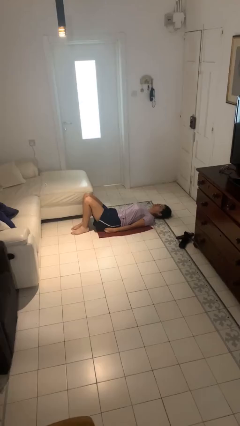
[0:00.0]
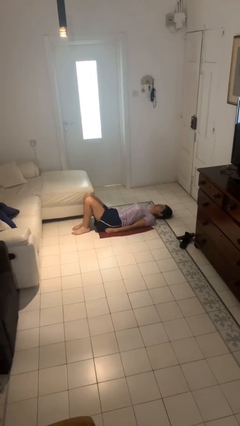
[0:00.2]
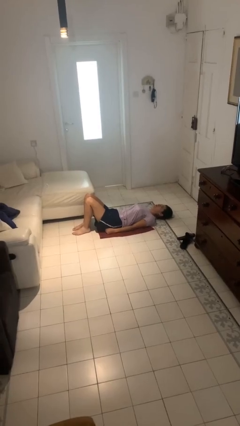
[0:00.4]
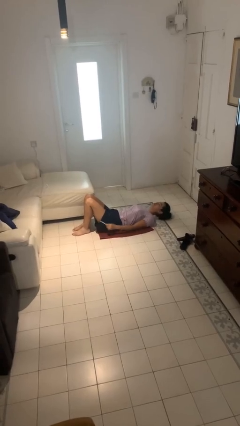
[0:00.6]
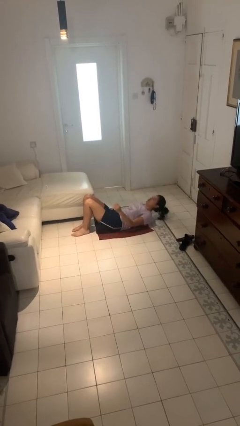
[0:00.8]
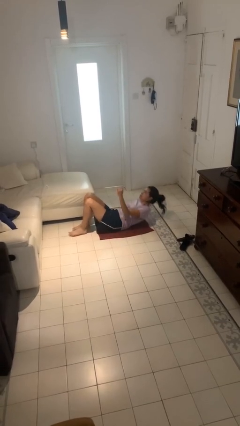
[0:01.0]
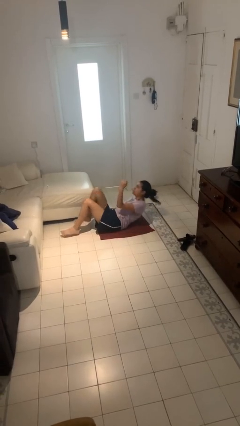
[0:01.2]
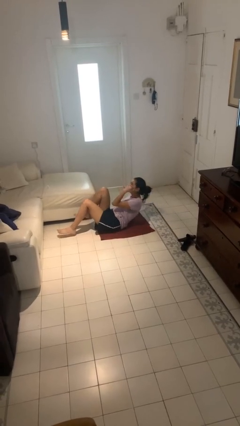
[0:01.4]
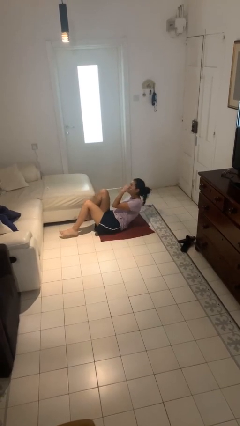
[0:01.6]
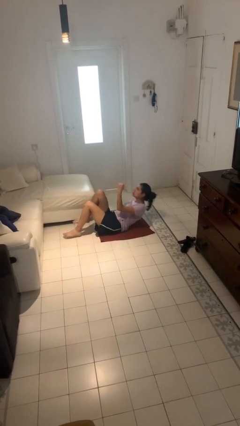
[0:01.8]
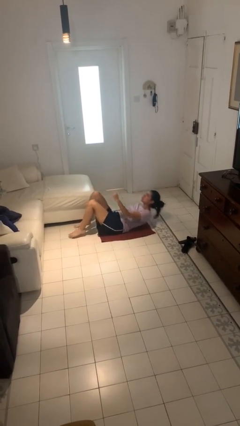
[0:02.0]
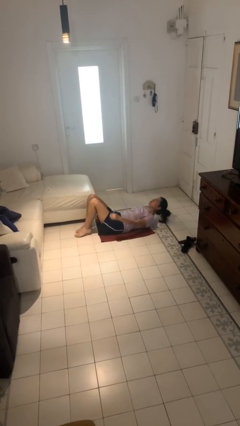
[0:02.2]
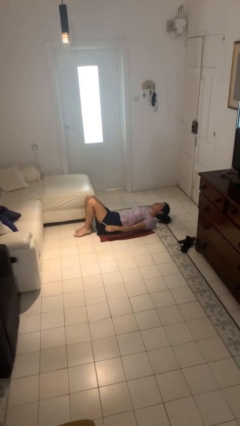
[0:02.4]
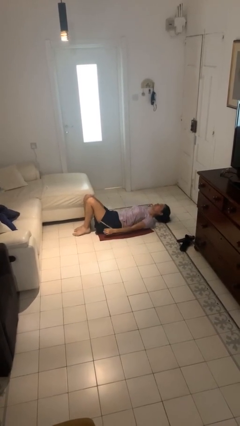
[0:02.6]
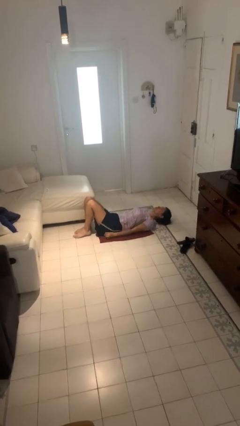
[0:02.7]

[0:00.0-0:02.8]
person exercises with situp

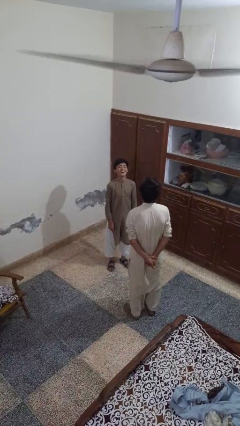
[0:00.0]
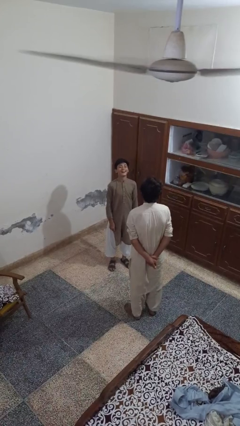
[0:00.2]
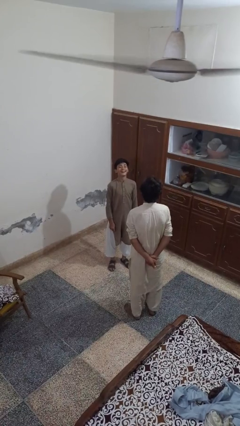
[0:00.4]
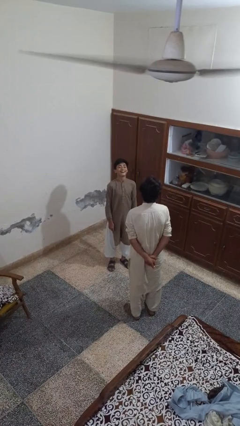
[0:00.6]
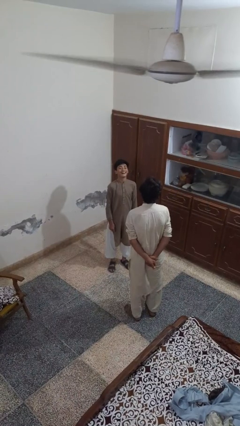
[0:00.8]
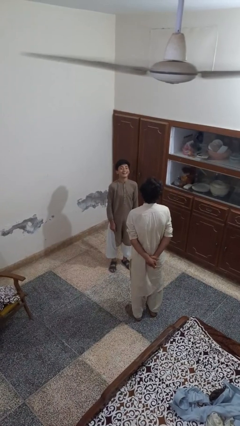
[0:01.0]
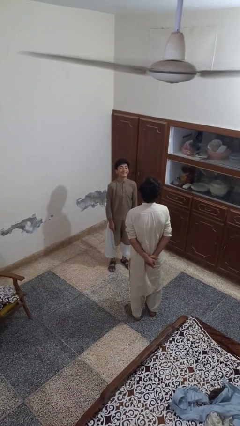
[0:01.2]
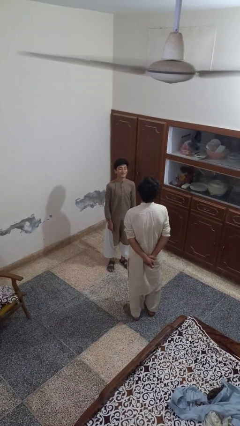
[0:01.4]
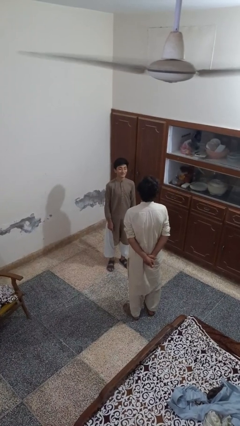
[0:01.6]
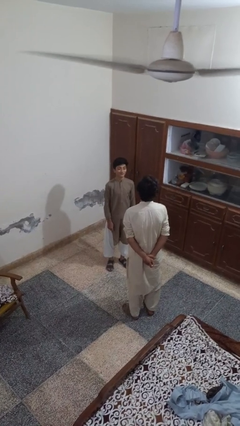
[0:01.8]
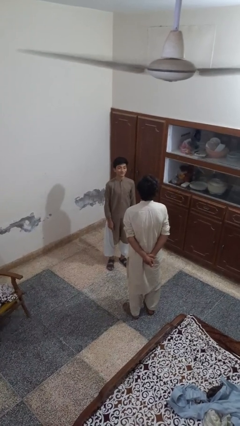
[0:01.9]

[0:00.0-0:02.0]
person laughs with person

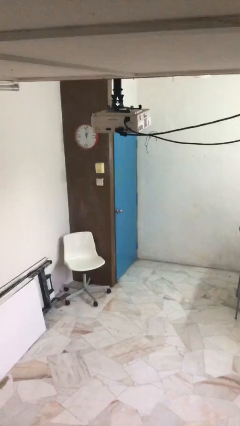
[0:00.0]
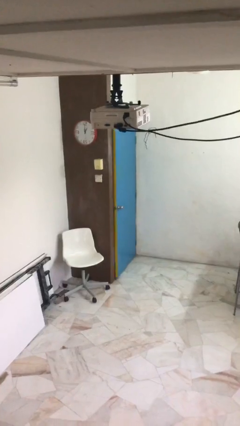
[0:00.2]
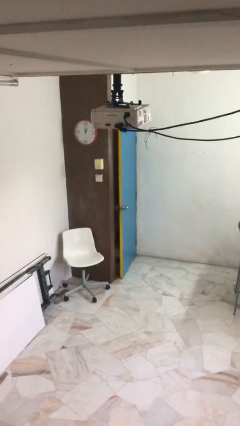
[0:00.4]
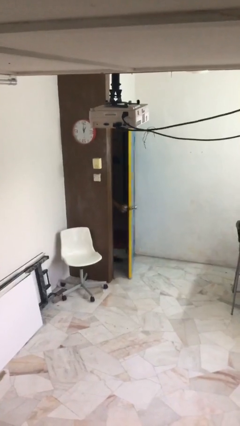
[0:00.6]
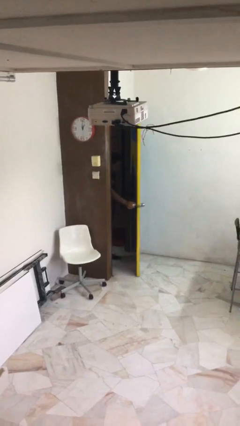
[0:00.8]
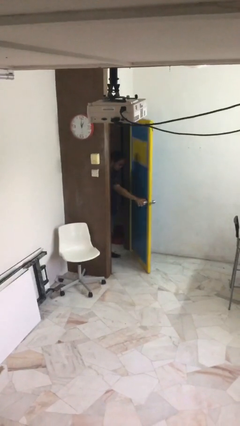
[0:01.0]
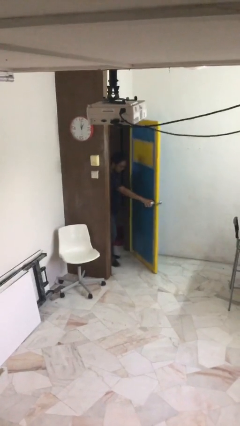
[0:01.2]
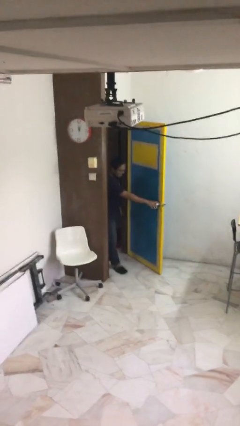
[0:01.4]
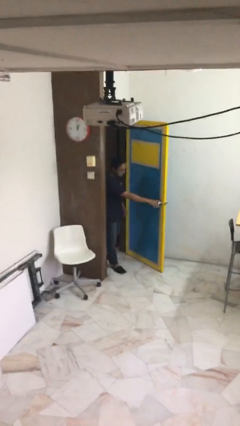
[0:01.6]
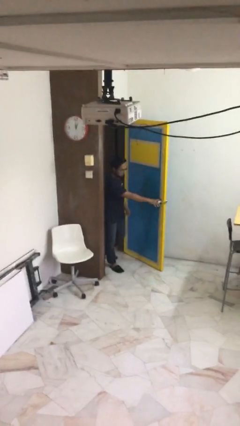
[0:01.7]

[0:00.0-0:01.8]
person opens facility door

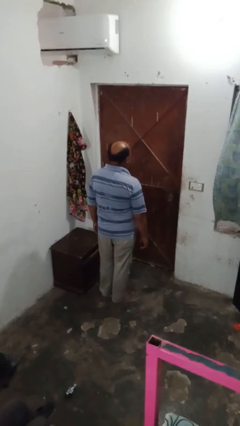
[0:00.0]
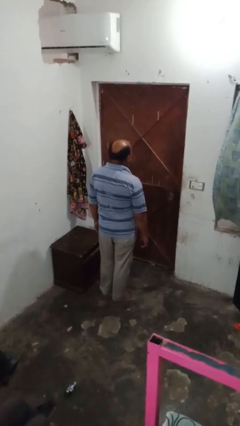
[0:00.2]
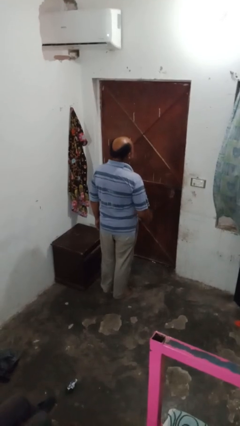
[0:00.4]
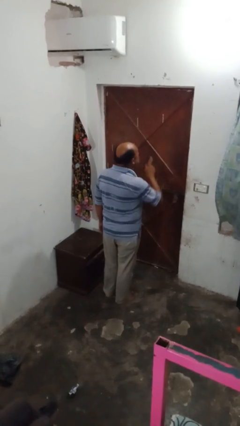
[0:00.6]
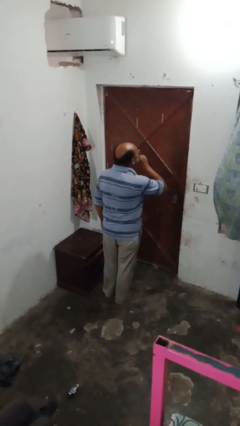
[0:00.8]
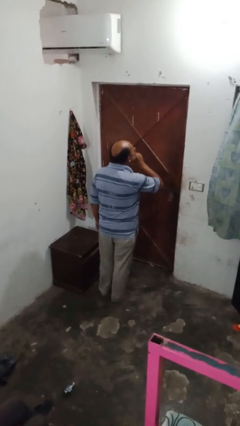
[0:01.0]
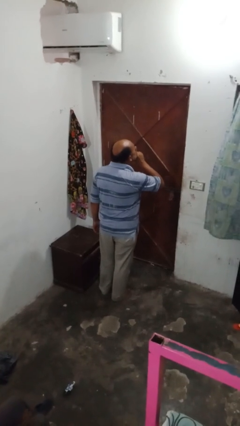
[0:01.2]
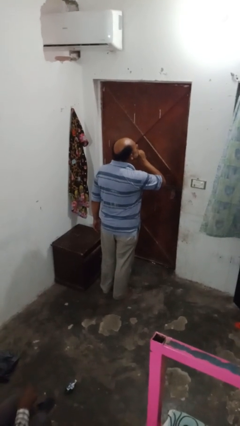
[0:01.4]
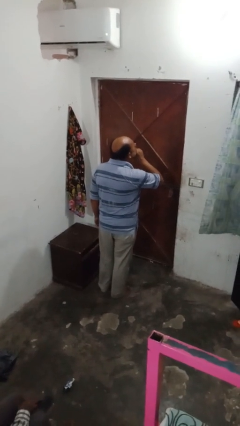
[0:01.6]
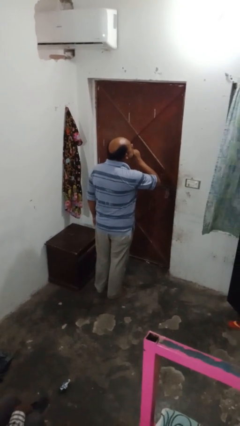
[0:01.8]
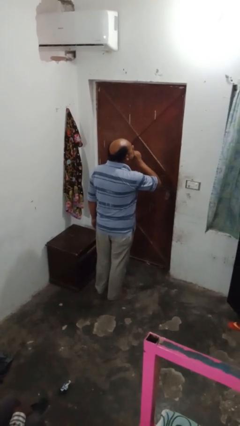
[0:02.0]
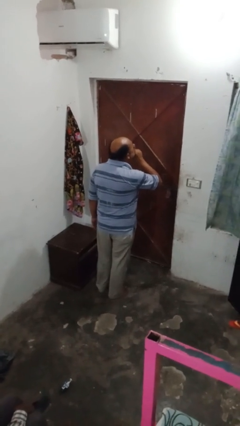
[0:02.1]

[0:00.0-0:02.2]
person gestures be quiet

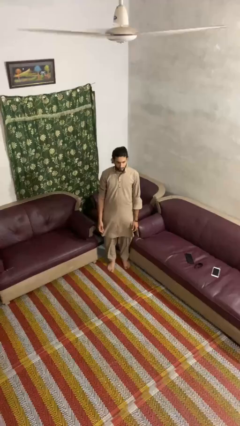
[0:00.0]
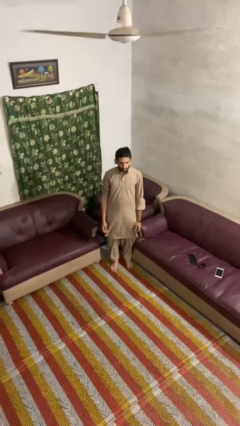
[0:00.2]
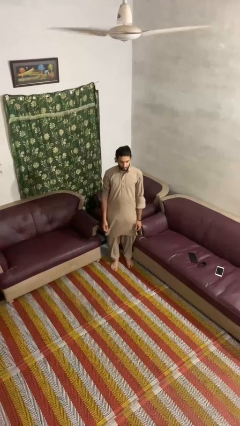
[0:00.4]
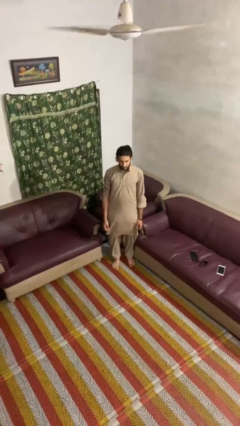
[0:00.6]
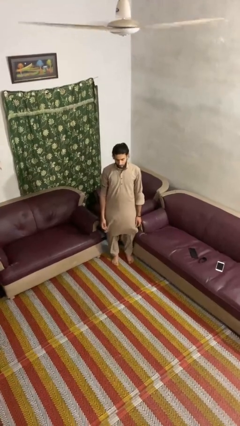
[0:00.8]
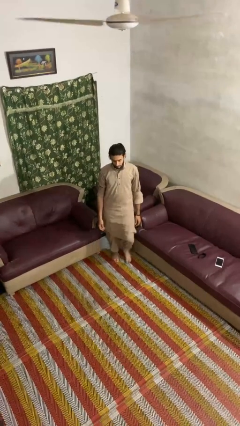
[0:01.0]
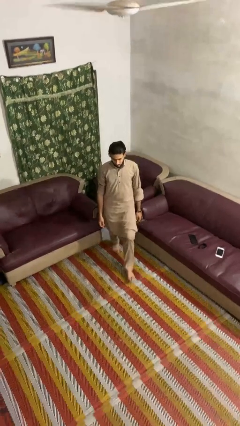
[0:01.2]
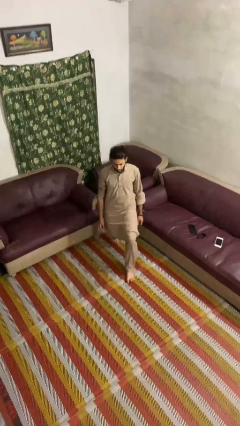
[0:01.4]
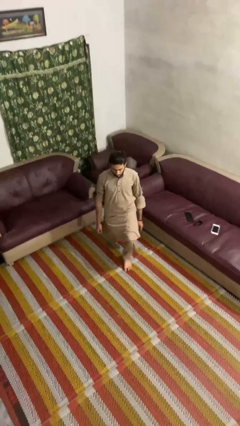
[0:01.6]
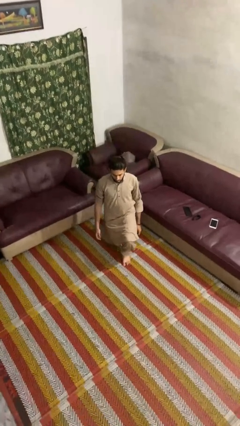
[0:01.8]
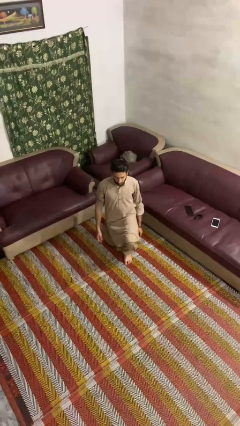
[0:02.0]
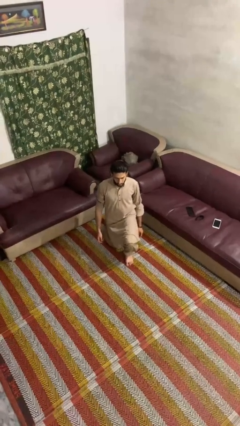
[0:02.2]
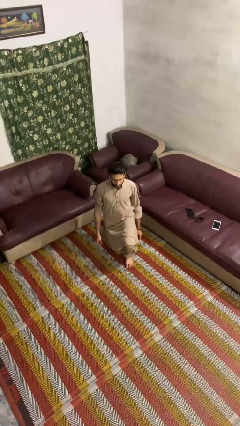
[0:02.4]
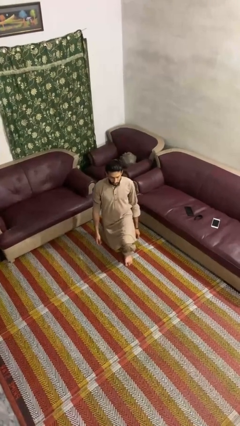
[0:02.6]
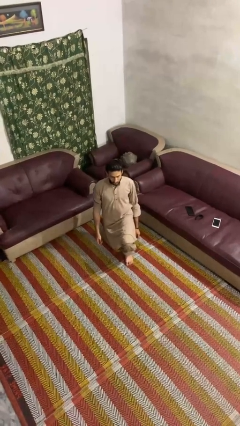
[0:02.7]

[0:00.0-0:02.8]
person kneels

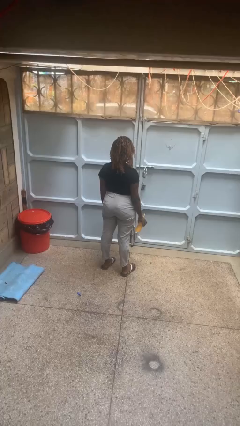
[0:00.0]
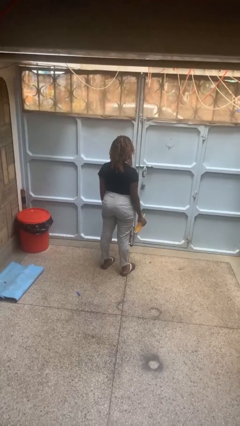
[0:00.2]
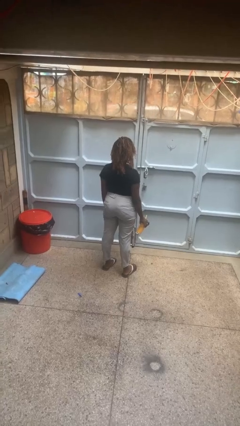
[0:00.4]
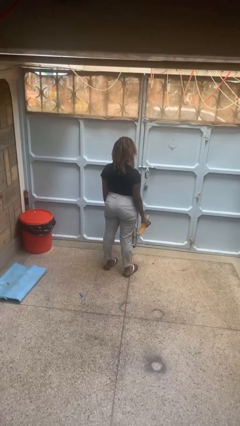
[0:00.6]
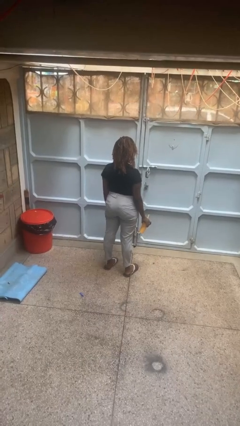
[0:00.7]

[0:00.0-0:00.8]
person drinks from straw

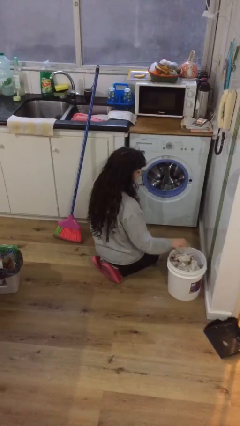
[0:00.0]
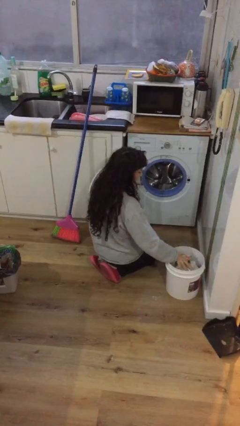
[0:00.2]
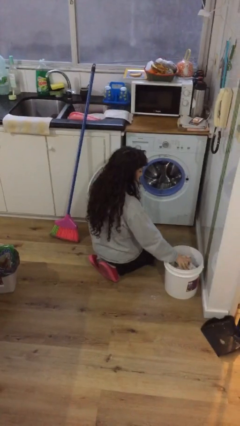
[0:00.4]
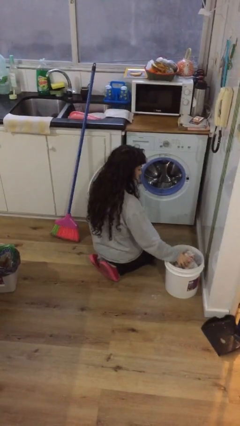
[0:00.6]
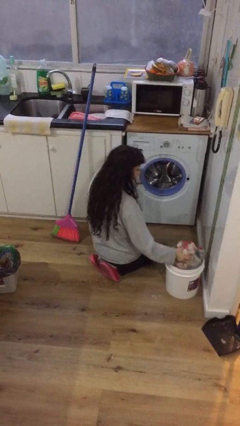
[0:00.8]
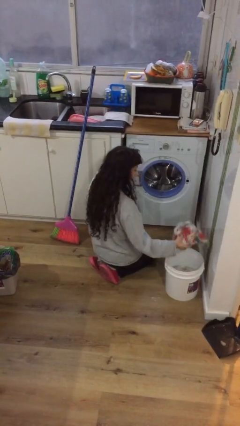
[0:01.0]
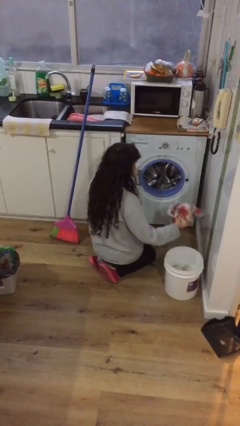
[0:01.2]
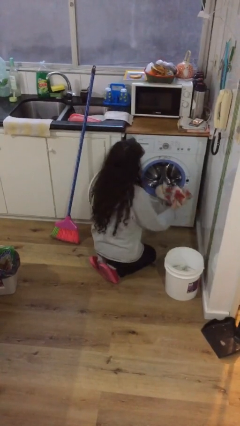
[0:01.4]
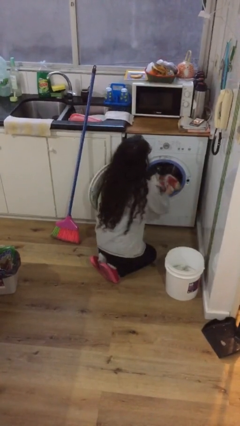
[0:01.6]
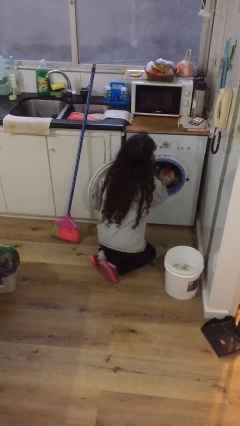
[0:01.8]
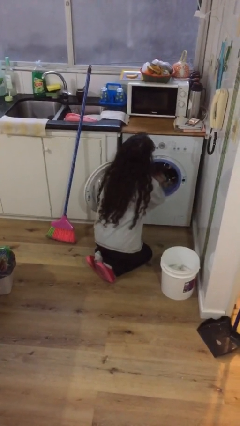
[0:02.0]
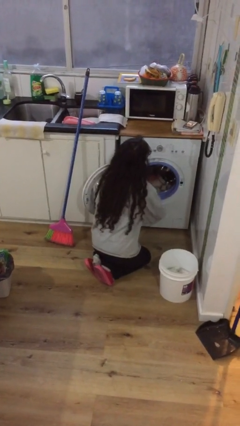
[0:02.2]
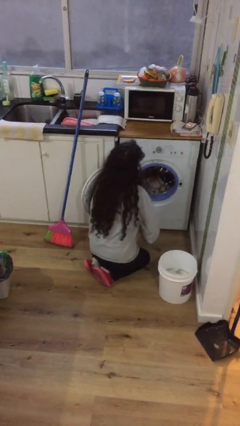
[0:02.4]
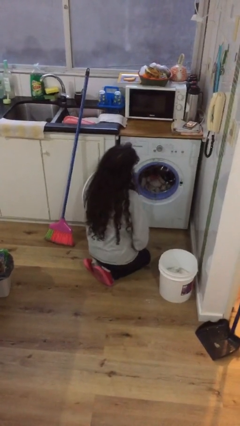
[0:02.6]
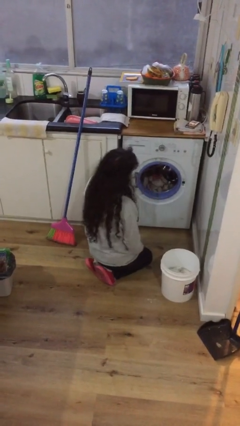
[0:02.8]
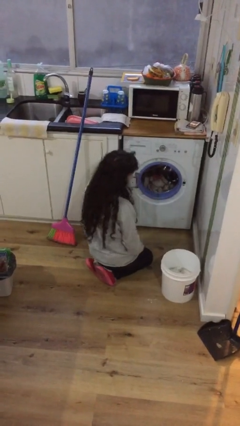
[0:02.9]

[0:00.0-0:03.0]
person loads dryer

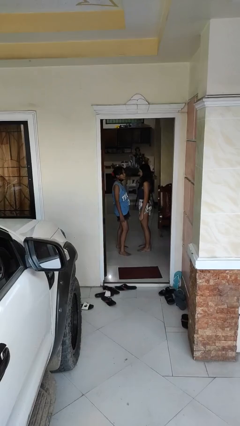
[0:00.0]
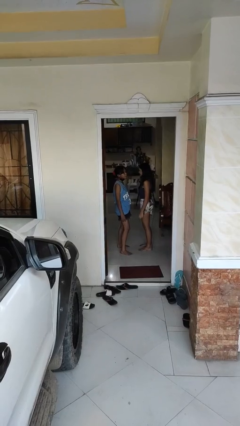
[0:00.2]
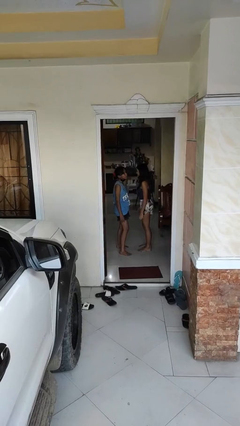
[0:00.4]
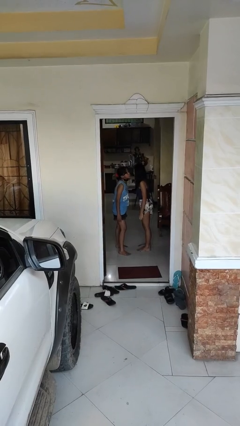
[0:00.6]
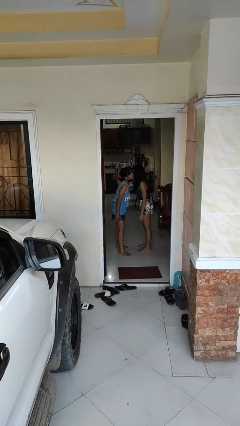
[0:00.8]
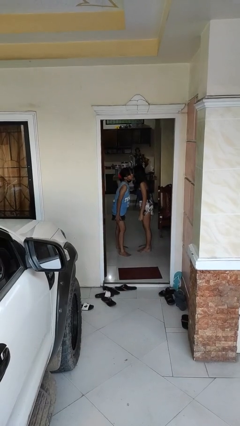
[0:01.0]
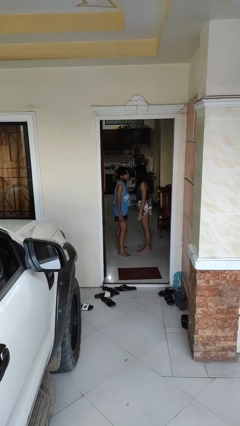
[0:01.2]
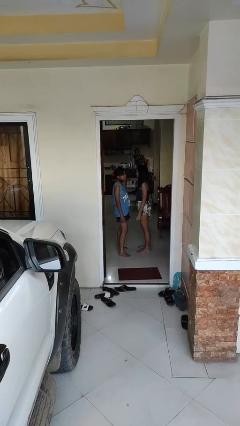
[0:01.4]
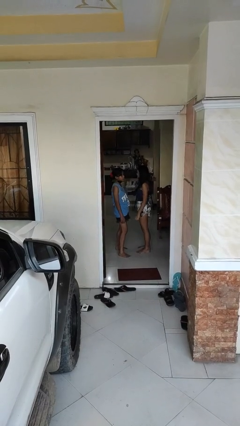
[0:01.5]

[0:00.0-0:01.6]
person kisses cheek of person
